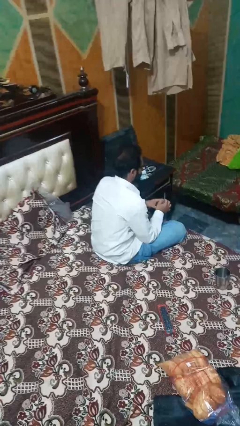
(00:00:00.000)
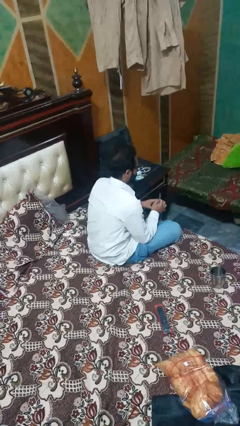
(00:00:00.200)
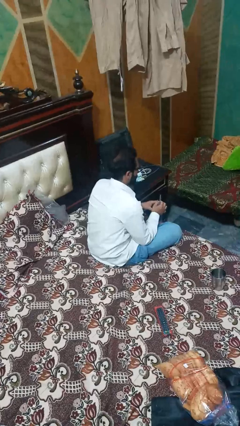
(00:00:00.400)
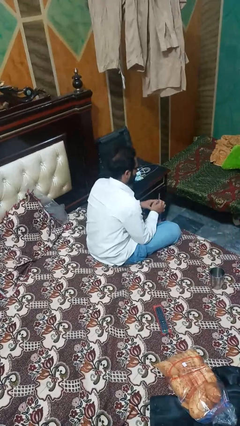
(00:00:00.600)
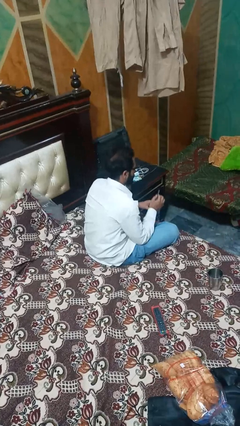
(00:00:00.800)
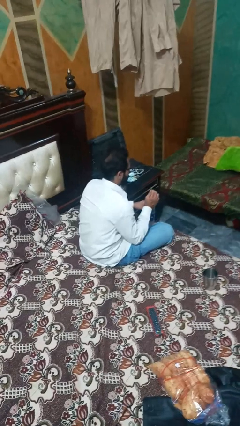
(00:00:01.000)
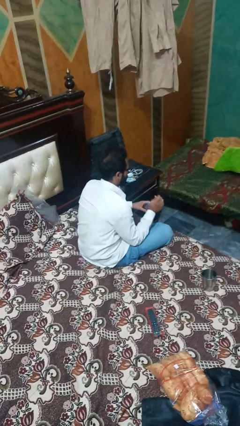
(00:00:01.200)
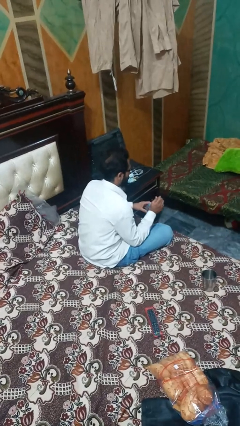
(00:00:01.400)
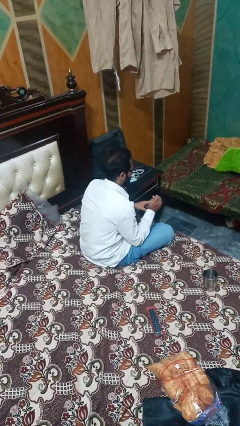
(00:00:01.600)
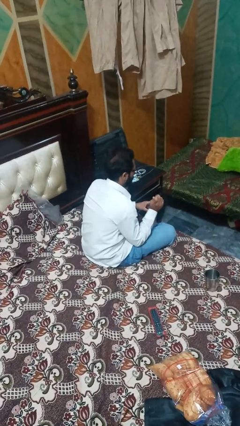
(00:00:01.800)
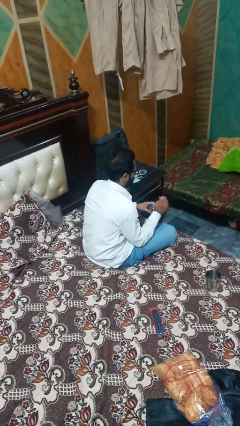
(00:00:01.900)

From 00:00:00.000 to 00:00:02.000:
person unscrews lid from bottle

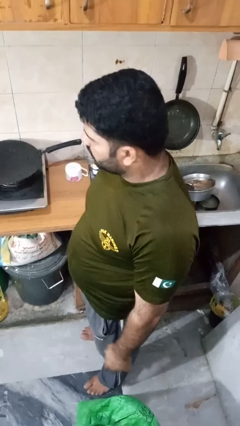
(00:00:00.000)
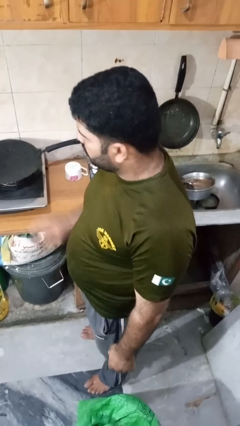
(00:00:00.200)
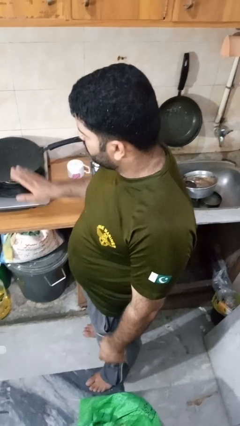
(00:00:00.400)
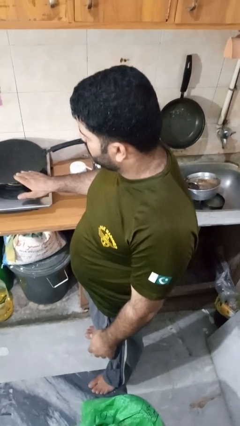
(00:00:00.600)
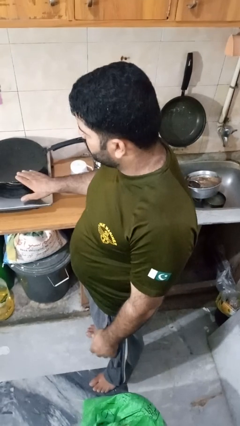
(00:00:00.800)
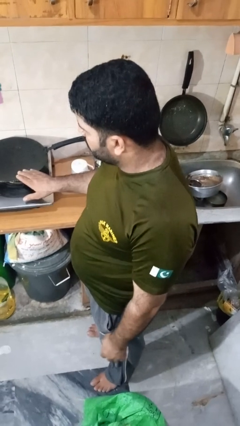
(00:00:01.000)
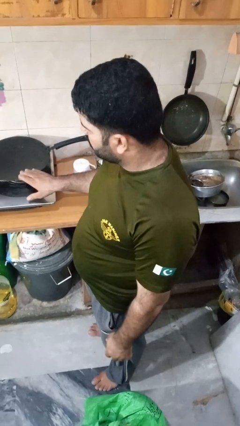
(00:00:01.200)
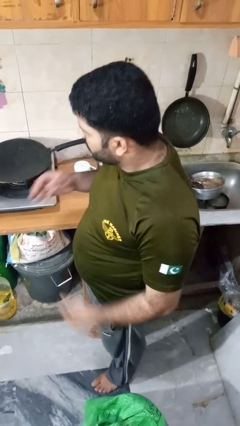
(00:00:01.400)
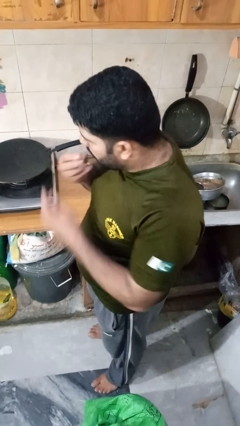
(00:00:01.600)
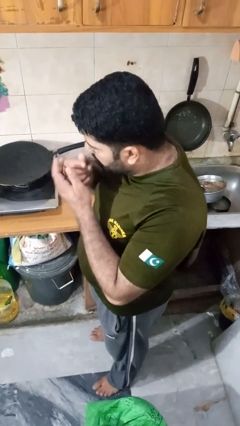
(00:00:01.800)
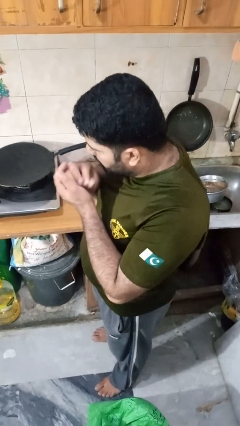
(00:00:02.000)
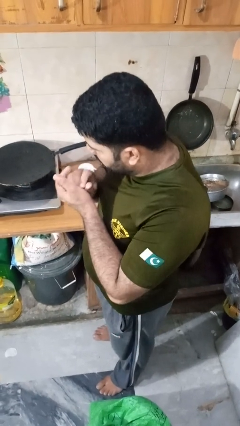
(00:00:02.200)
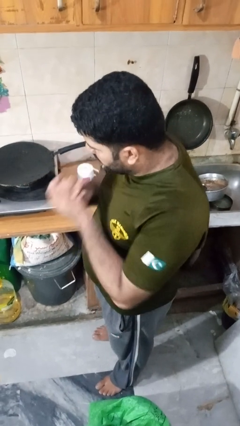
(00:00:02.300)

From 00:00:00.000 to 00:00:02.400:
person burns hand

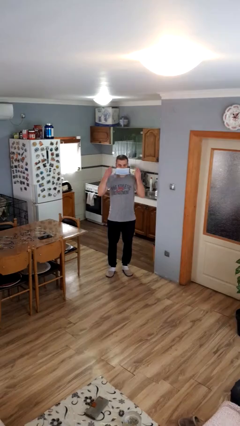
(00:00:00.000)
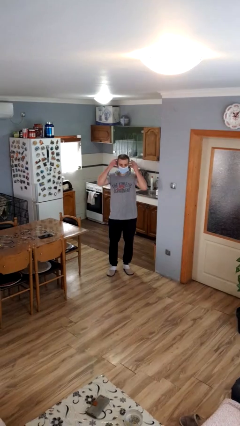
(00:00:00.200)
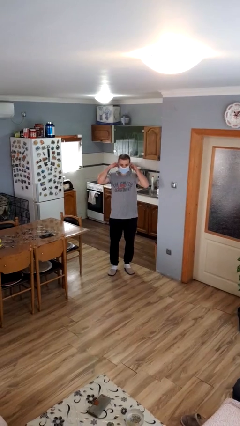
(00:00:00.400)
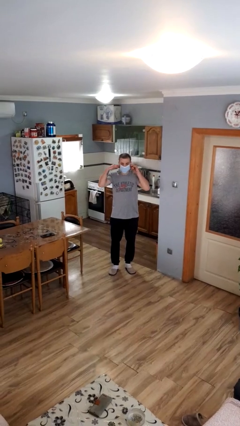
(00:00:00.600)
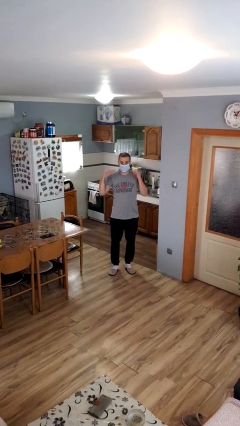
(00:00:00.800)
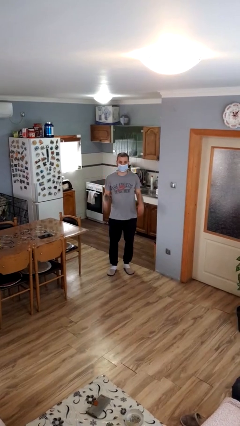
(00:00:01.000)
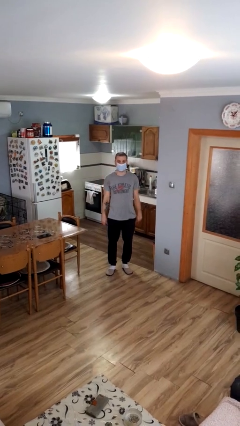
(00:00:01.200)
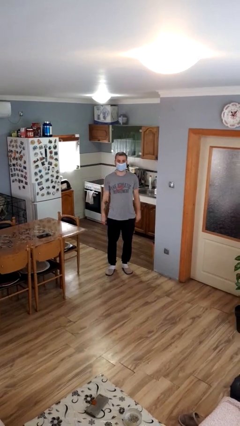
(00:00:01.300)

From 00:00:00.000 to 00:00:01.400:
person puts on facemask

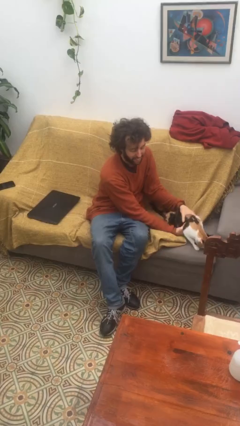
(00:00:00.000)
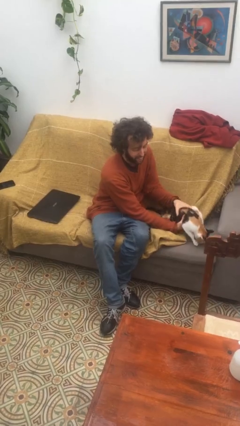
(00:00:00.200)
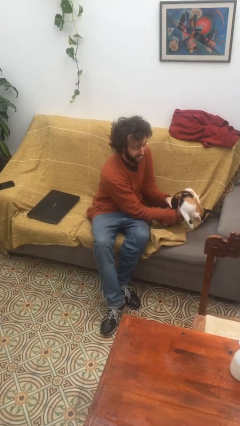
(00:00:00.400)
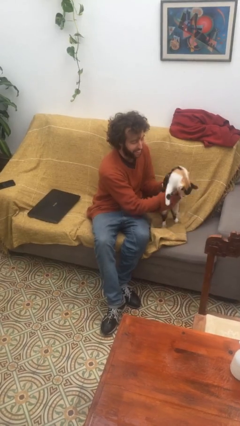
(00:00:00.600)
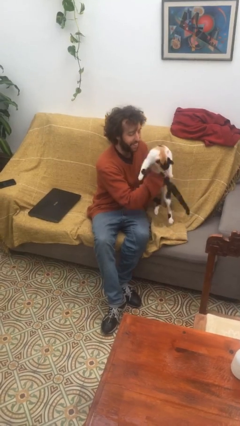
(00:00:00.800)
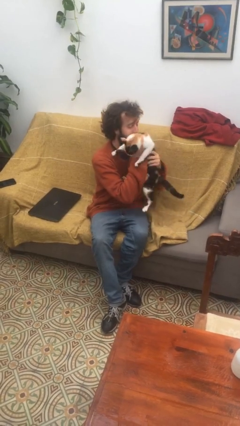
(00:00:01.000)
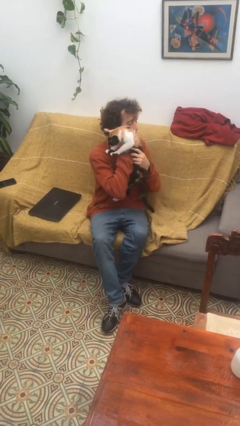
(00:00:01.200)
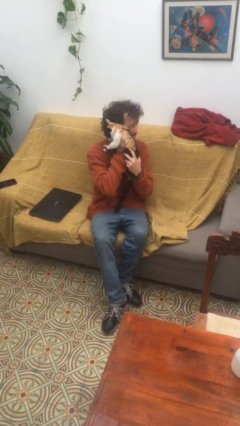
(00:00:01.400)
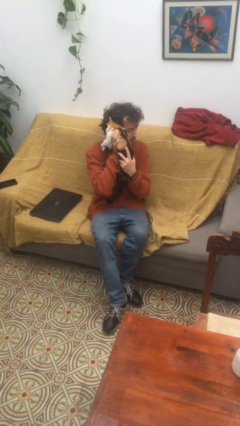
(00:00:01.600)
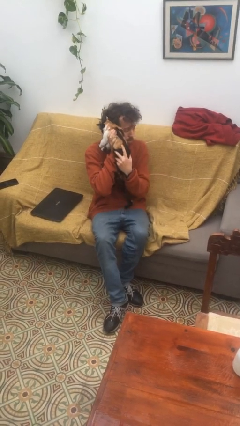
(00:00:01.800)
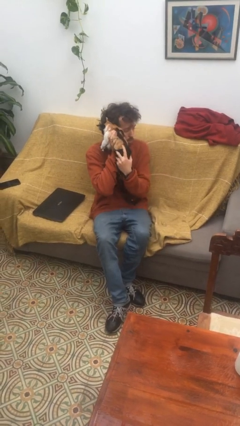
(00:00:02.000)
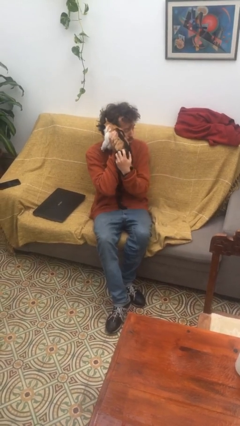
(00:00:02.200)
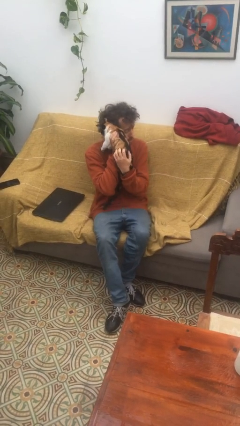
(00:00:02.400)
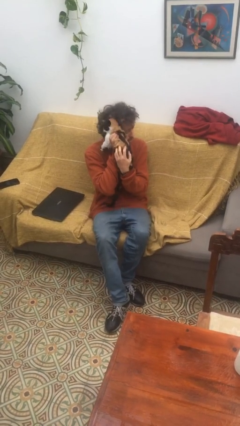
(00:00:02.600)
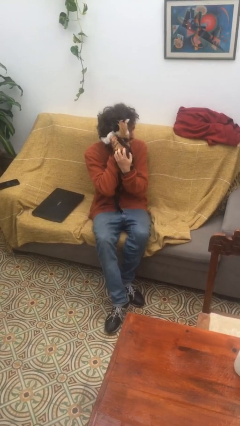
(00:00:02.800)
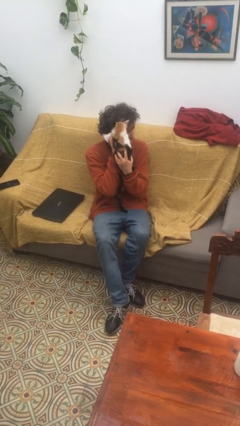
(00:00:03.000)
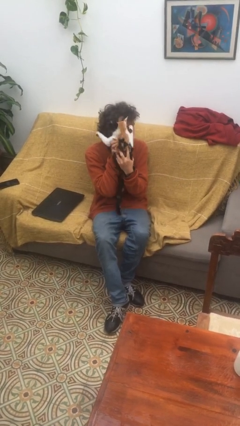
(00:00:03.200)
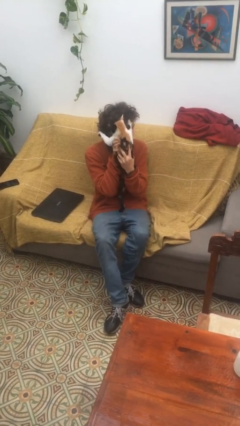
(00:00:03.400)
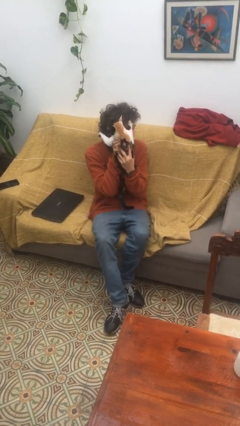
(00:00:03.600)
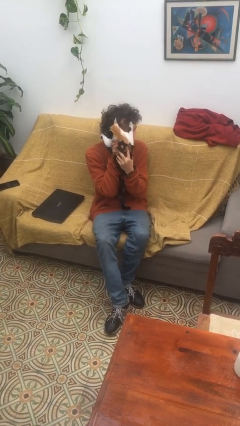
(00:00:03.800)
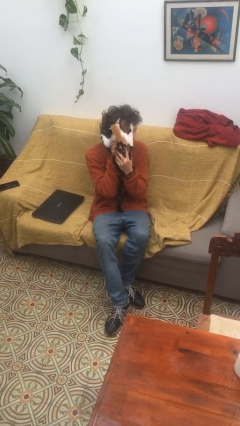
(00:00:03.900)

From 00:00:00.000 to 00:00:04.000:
person hugs cat

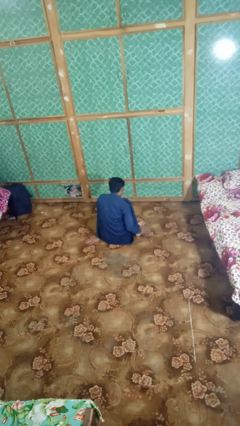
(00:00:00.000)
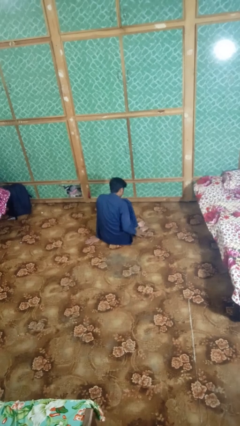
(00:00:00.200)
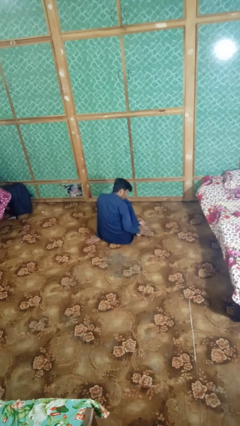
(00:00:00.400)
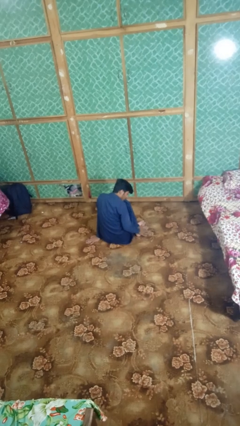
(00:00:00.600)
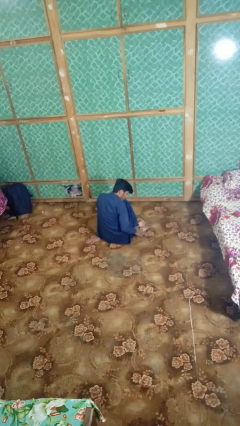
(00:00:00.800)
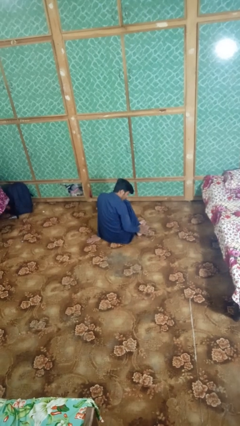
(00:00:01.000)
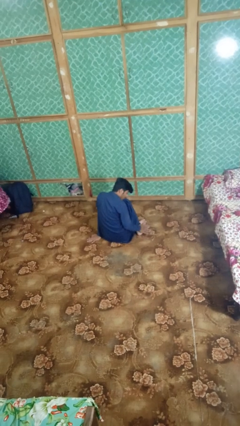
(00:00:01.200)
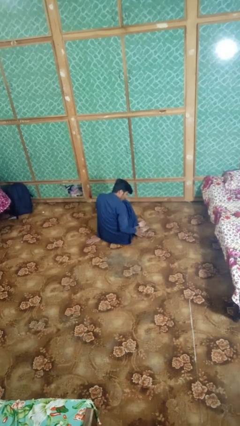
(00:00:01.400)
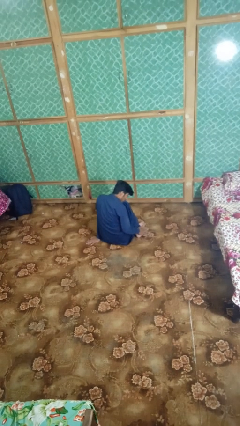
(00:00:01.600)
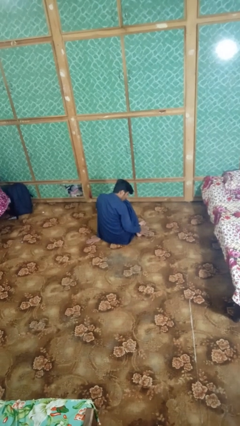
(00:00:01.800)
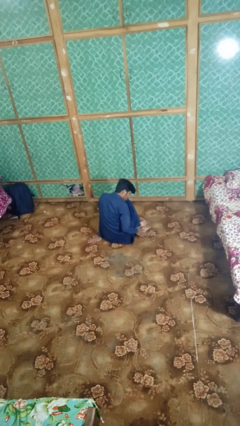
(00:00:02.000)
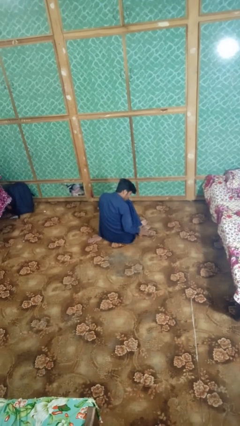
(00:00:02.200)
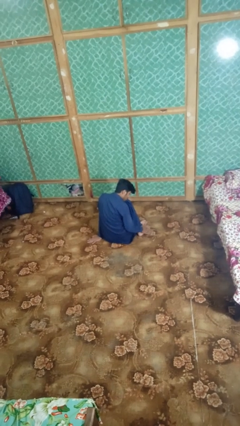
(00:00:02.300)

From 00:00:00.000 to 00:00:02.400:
person rubs foot

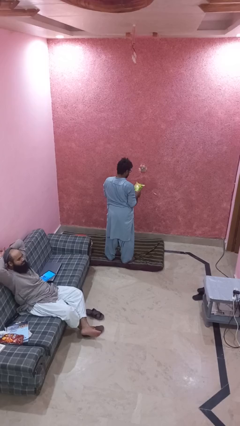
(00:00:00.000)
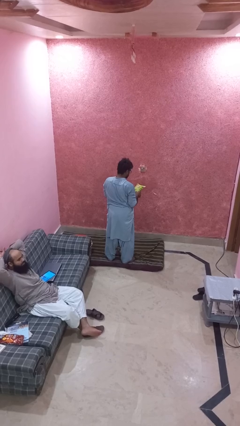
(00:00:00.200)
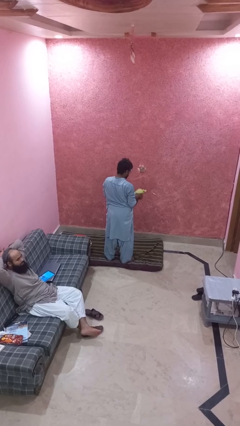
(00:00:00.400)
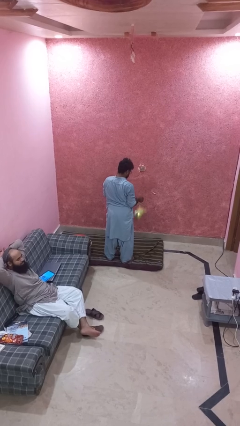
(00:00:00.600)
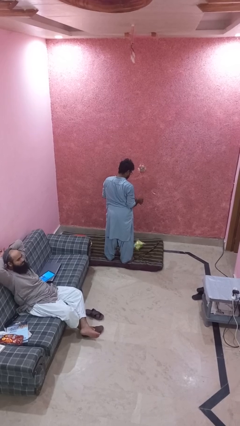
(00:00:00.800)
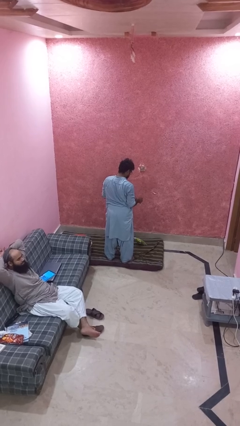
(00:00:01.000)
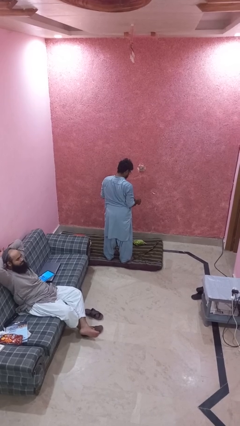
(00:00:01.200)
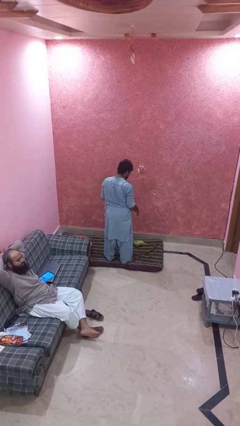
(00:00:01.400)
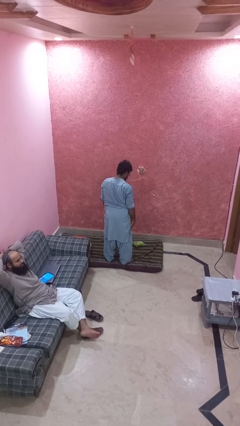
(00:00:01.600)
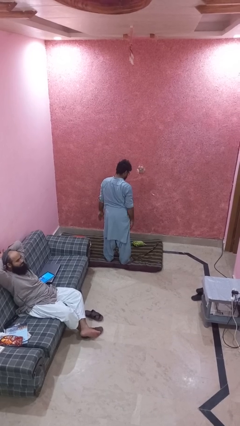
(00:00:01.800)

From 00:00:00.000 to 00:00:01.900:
person drops object

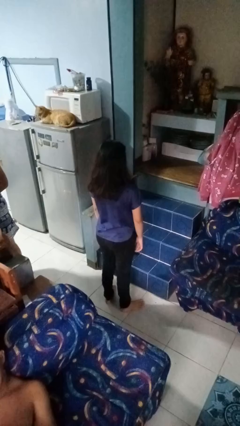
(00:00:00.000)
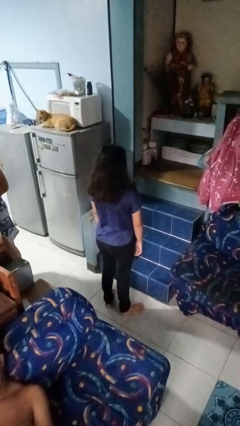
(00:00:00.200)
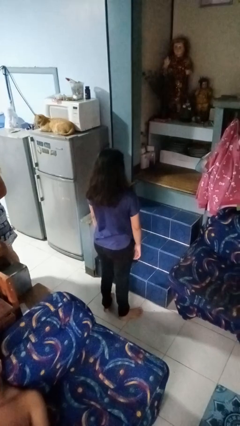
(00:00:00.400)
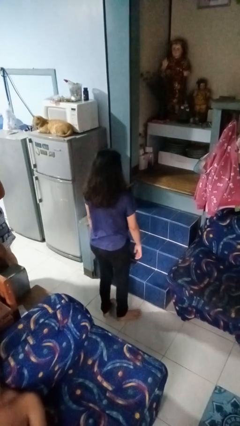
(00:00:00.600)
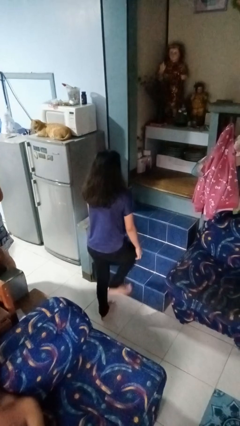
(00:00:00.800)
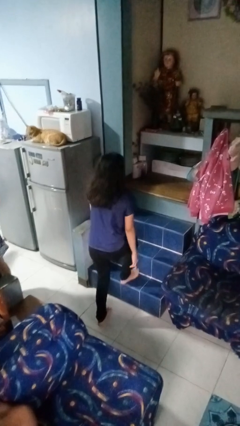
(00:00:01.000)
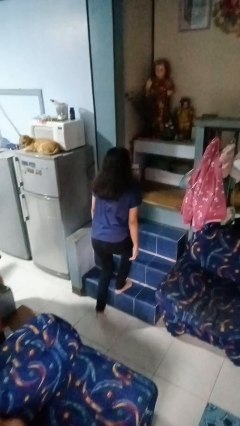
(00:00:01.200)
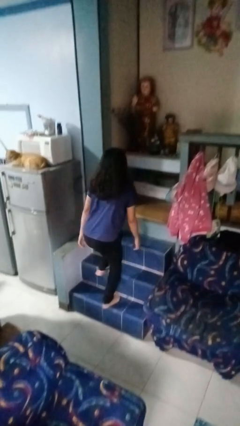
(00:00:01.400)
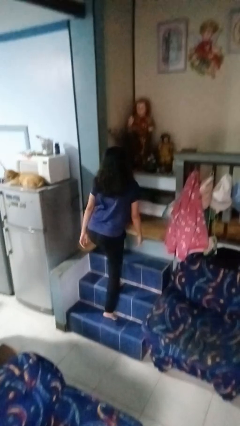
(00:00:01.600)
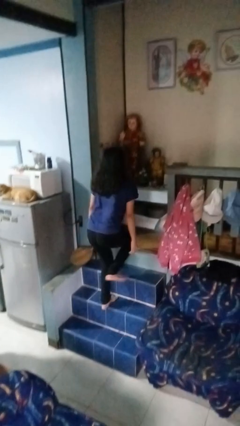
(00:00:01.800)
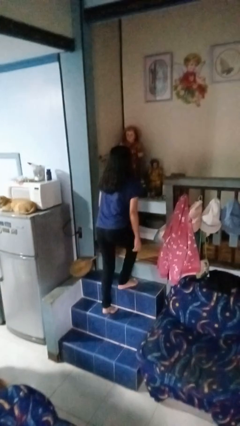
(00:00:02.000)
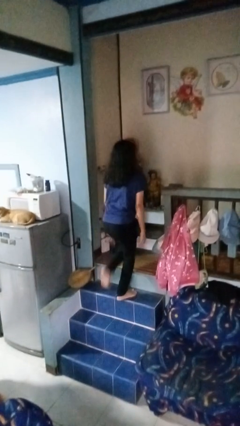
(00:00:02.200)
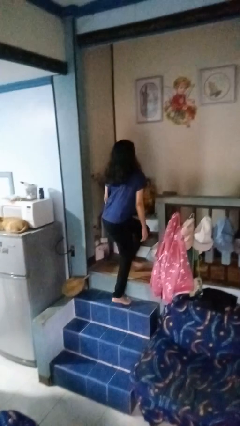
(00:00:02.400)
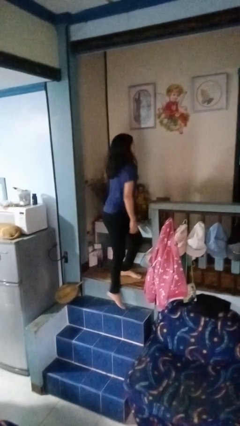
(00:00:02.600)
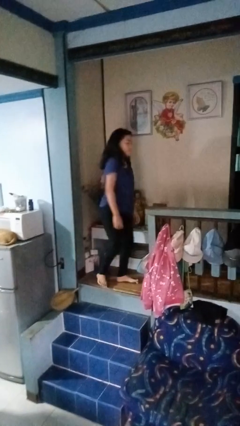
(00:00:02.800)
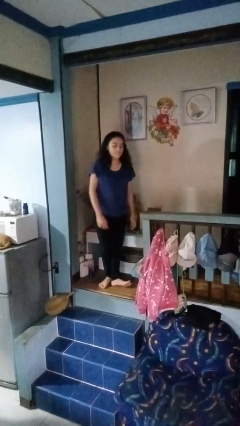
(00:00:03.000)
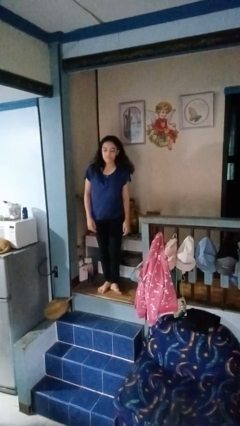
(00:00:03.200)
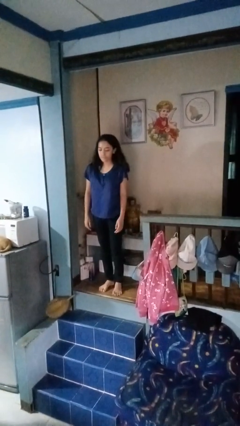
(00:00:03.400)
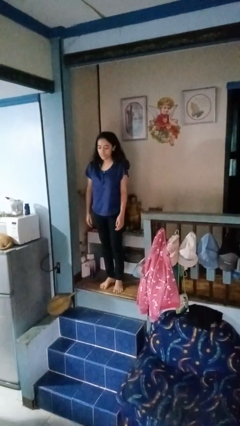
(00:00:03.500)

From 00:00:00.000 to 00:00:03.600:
person climbs up stairs
